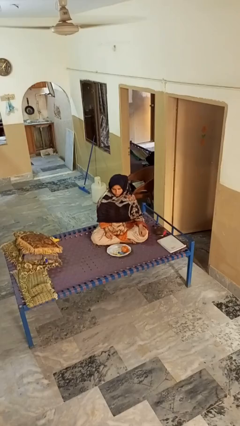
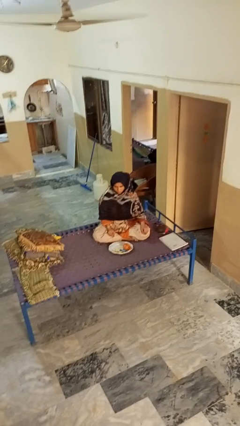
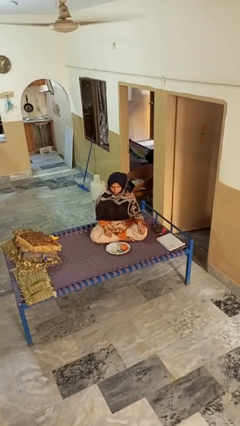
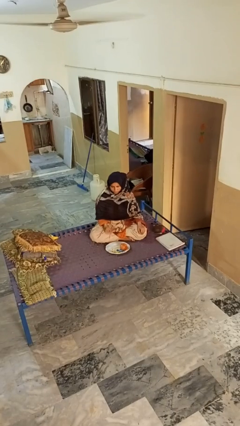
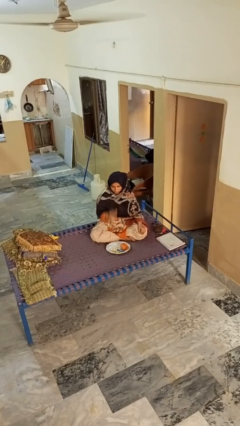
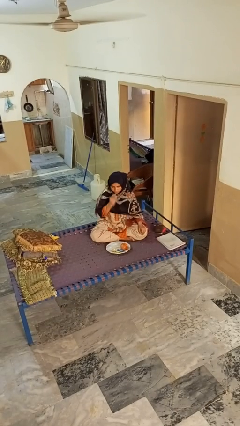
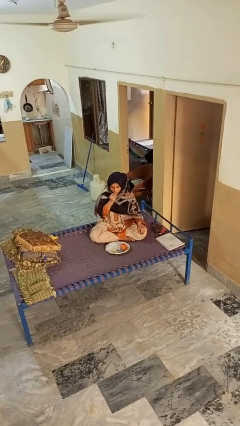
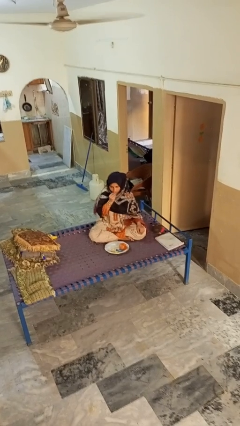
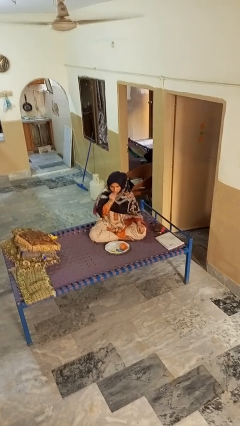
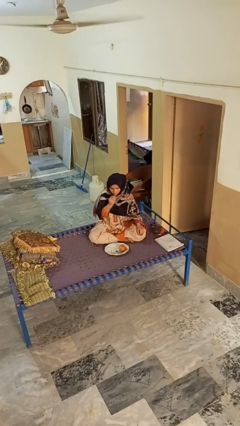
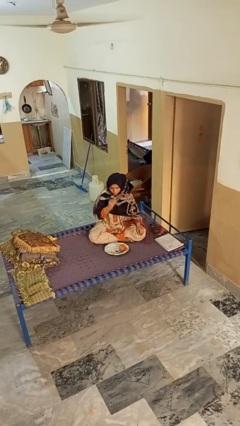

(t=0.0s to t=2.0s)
person eats apple

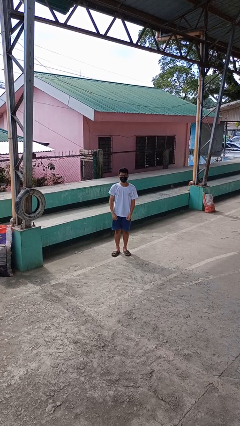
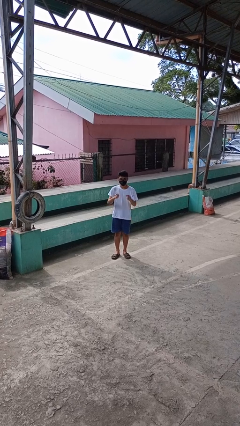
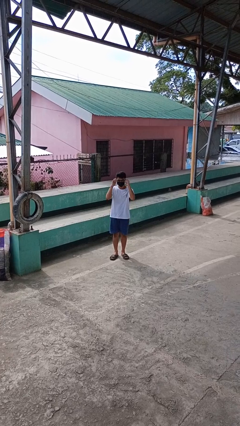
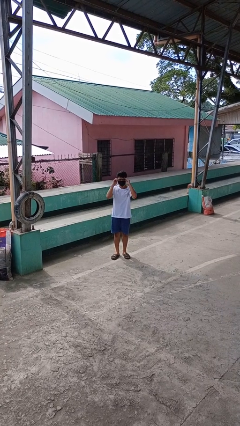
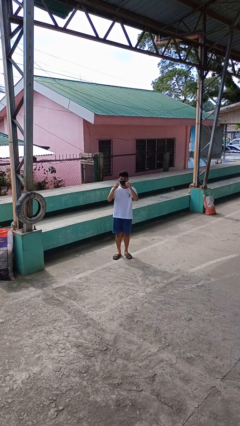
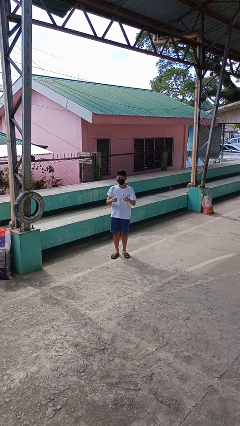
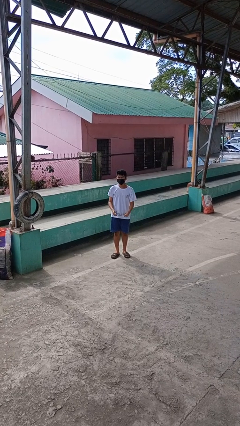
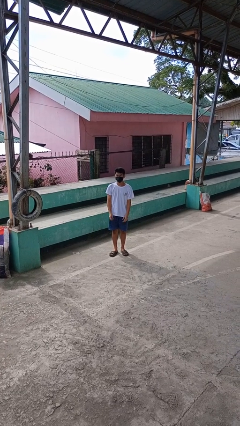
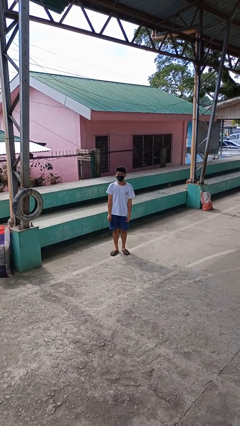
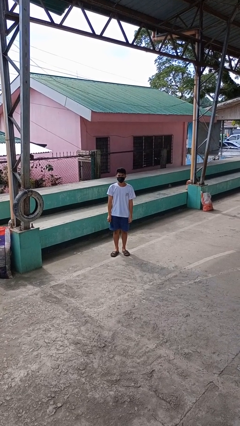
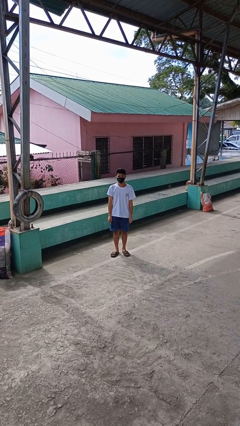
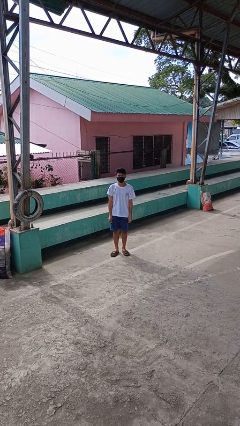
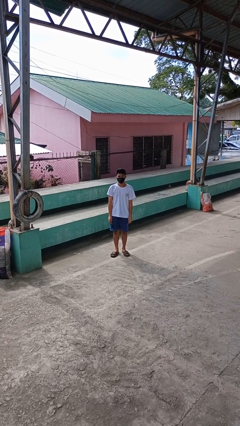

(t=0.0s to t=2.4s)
person takes off glasses

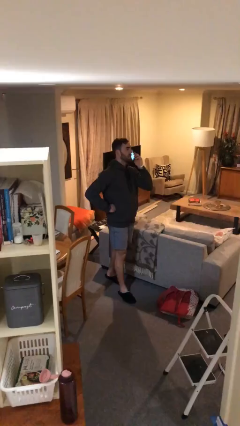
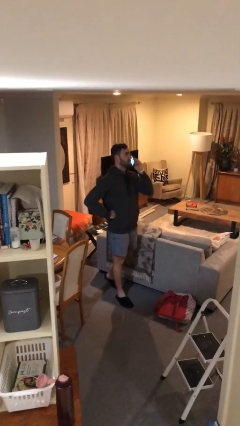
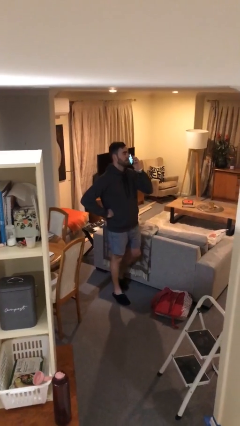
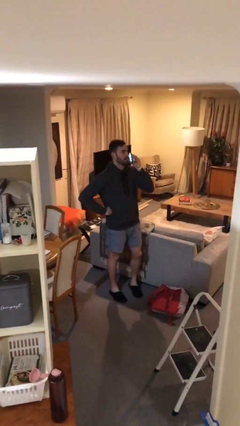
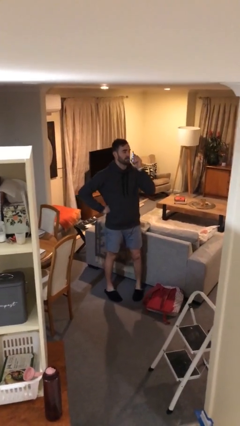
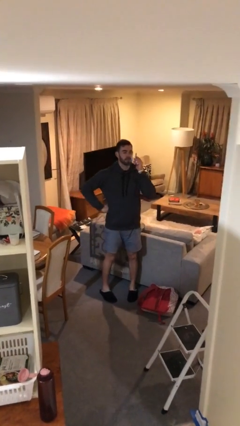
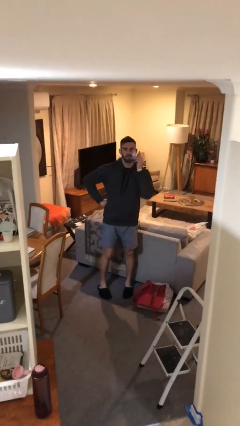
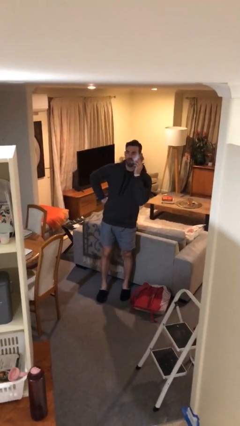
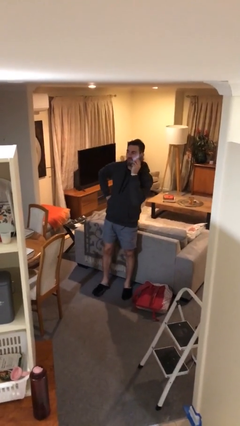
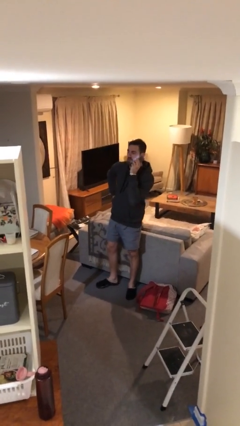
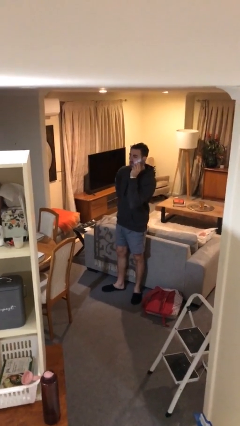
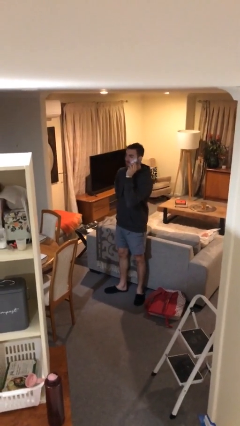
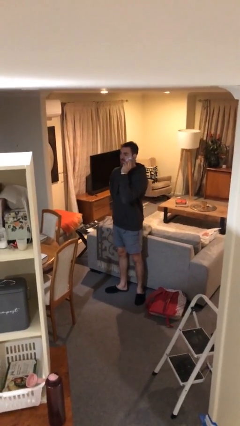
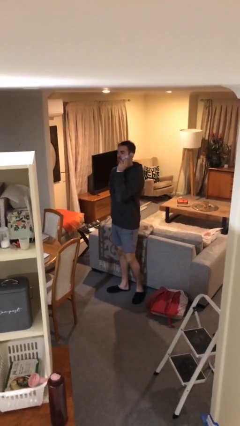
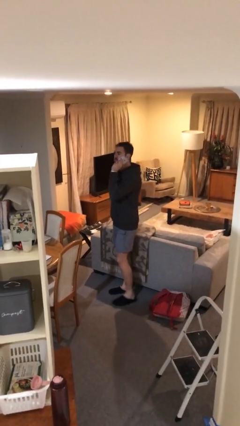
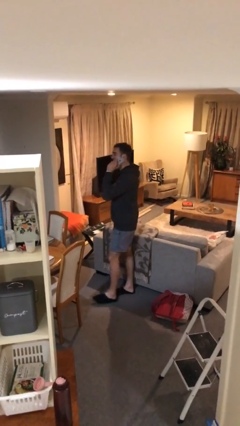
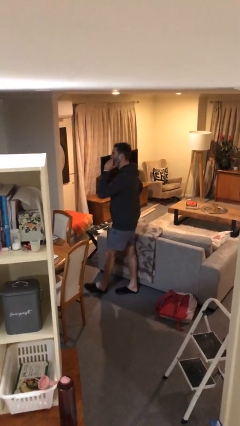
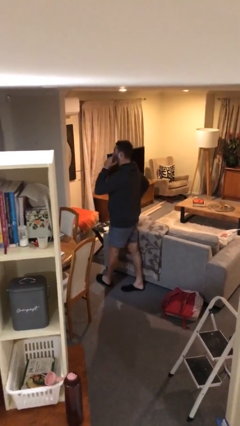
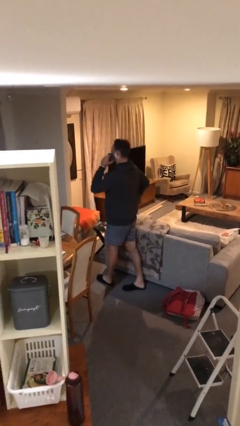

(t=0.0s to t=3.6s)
person talks on phone

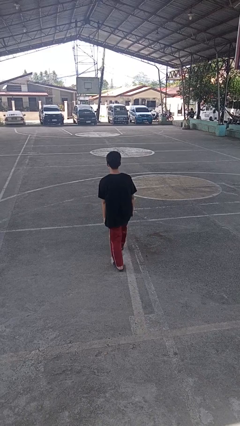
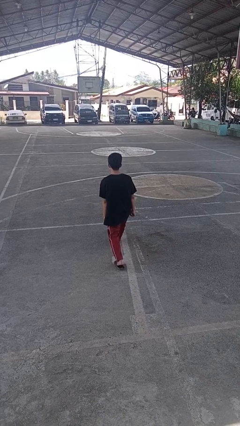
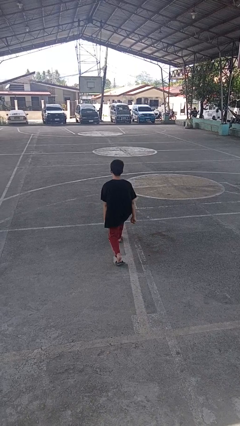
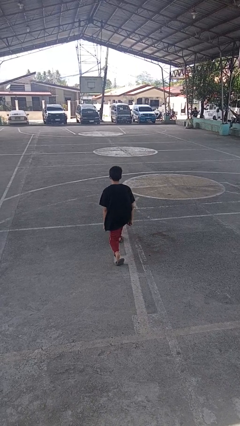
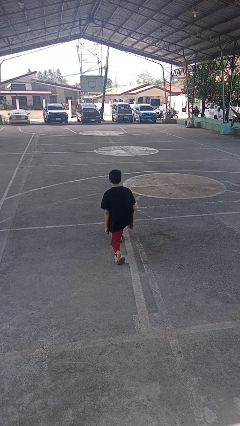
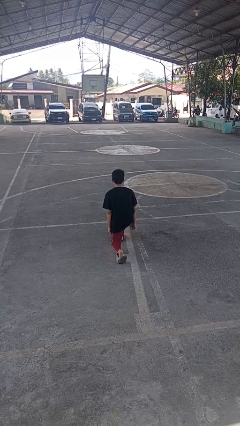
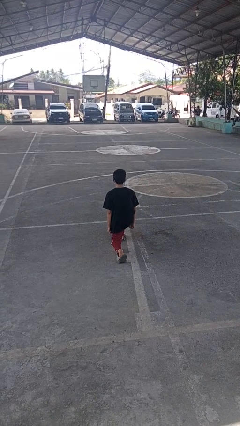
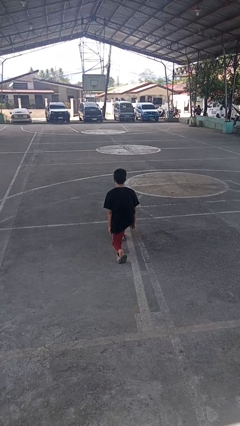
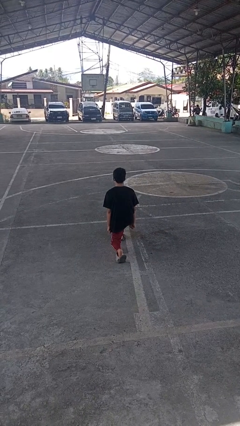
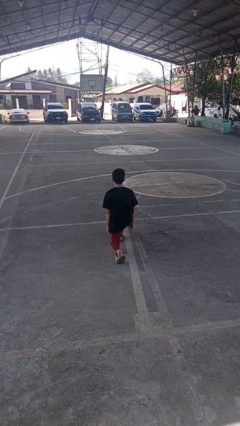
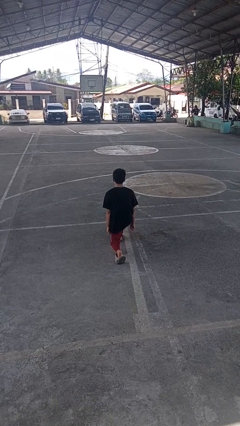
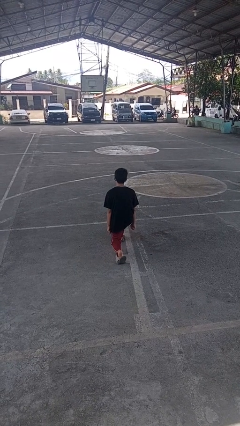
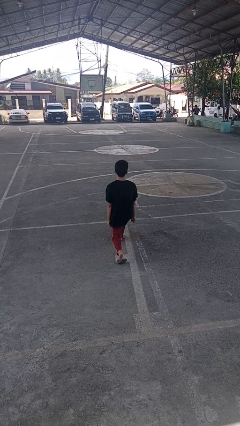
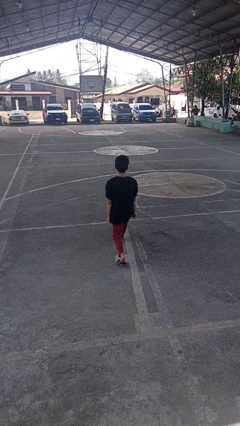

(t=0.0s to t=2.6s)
person exercises with lunges

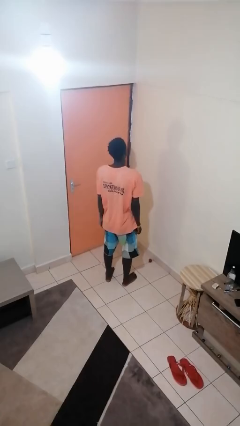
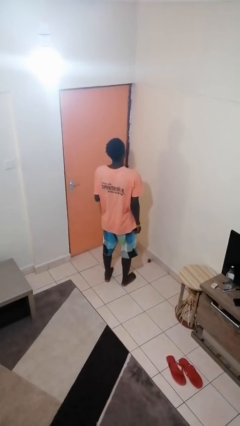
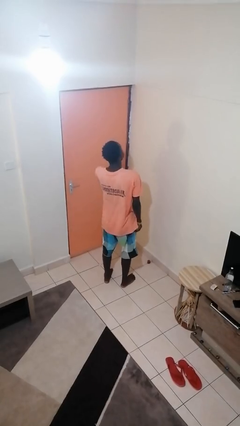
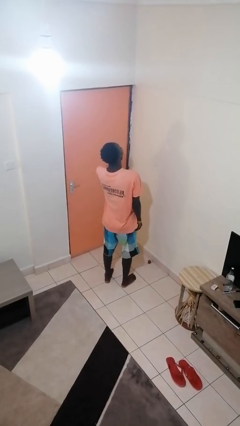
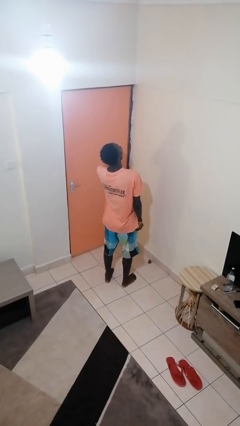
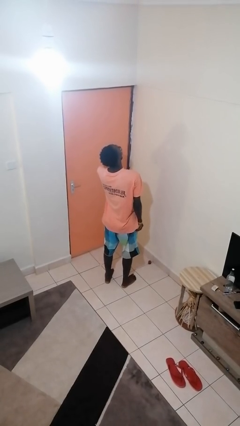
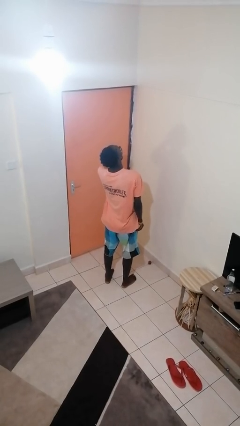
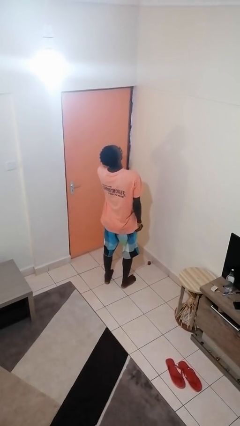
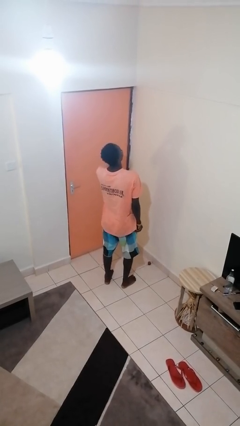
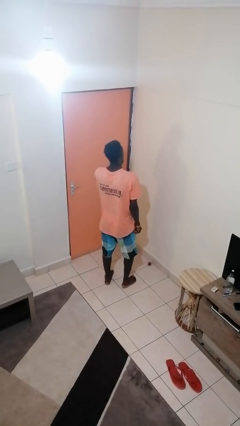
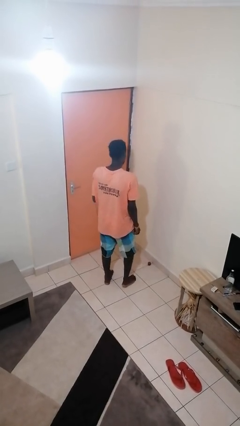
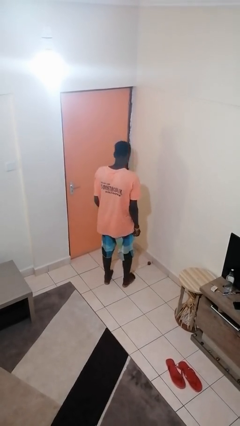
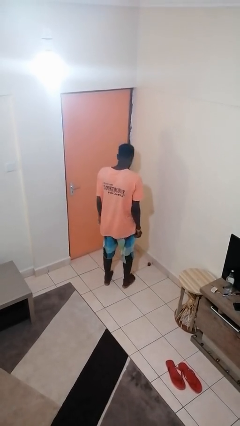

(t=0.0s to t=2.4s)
person yawns

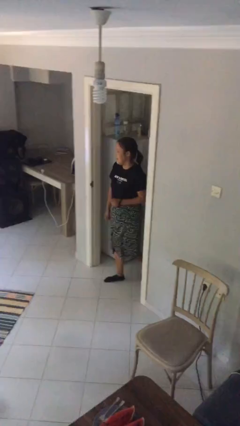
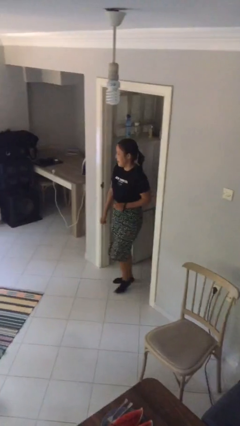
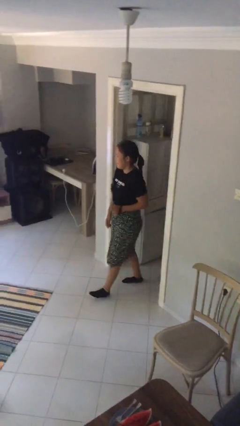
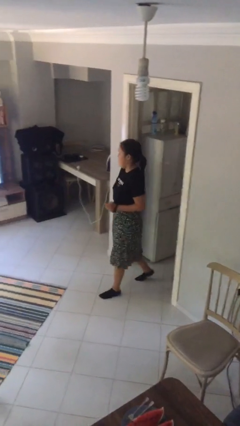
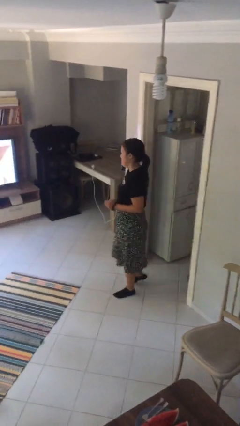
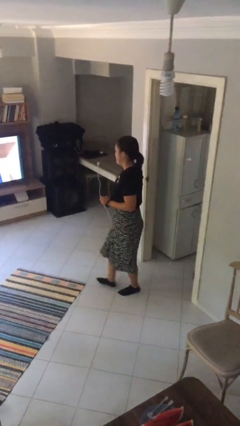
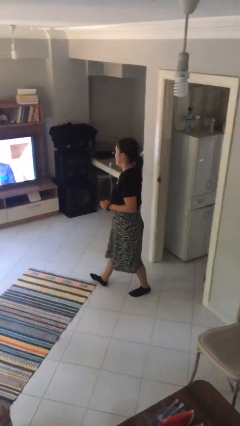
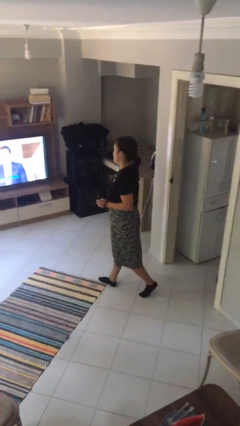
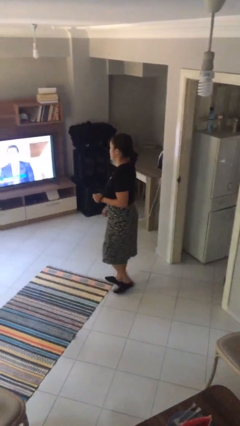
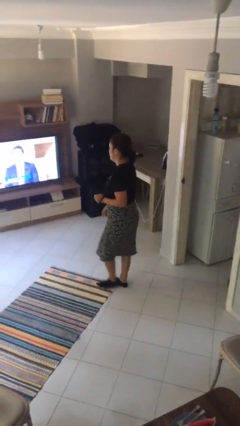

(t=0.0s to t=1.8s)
person enters scene through structure

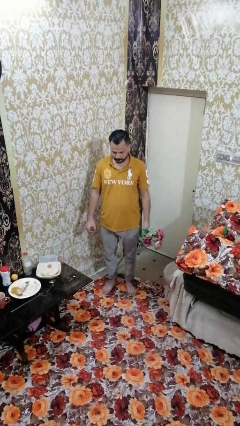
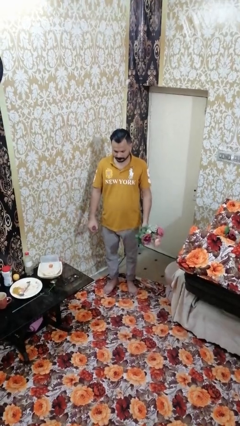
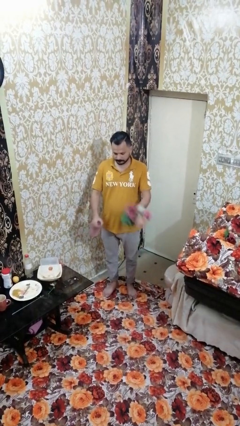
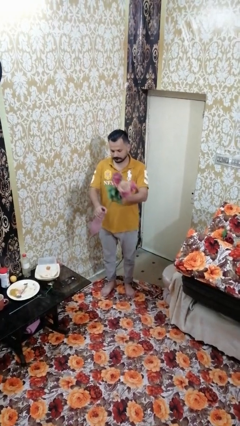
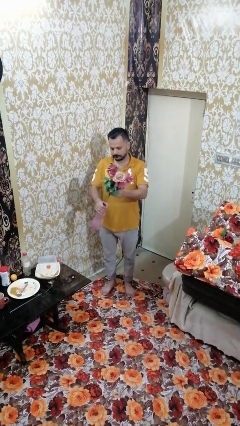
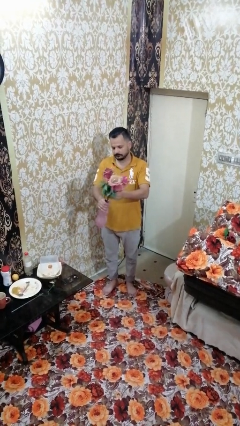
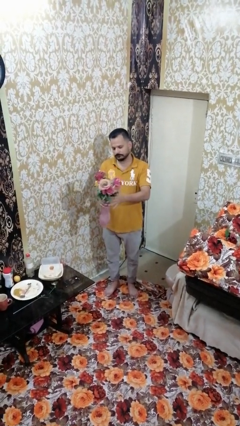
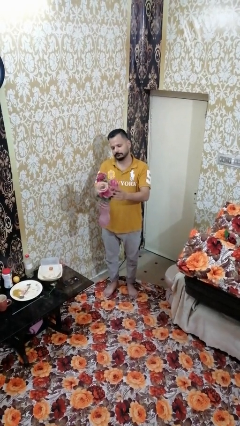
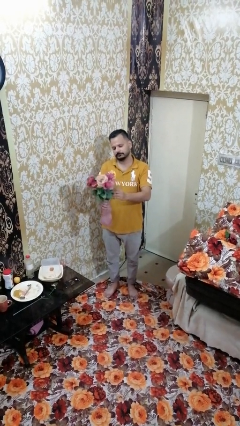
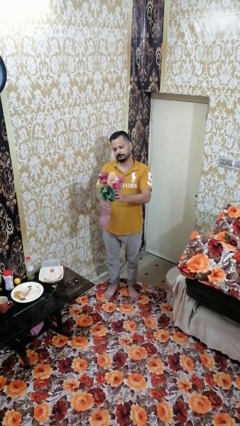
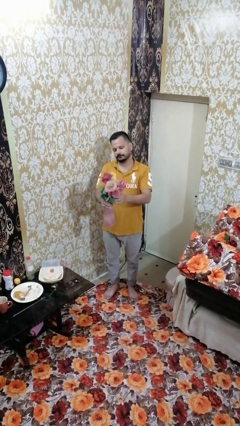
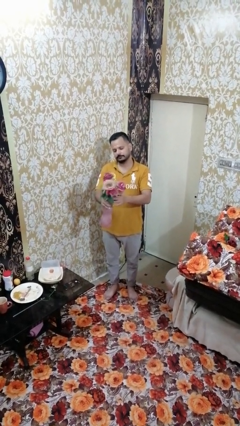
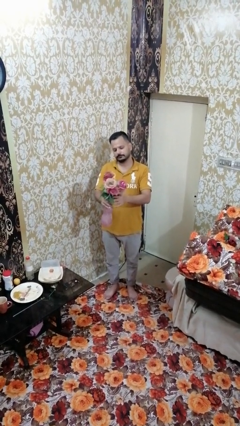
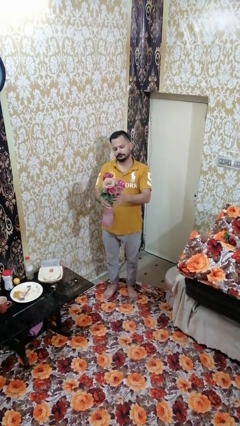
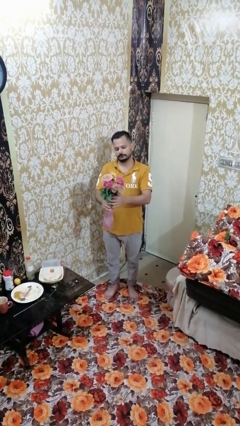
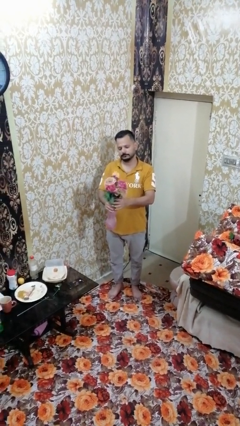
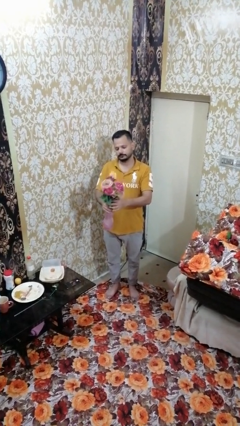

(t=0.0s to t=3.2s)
person arranges flowers in vase
